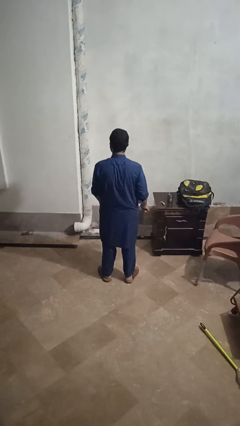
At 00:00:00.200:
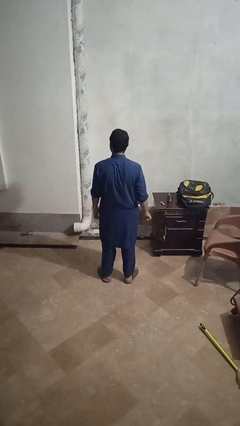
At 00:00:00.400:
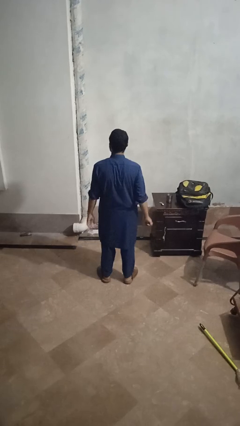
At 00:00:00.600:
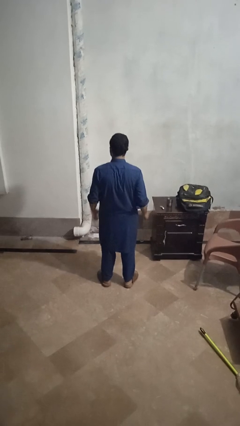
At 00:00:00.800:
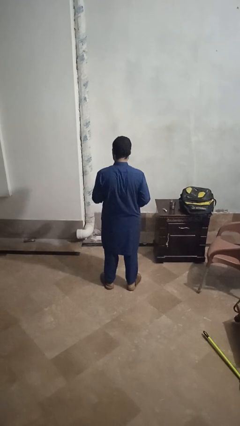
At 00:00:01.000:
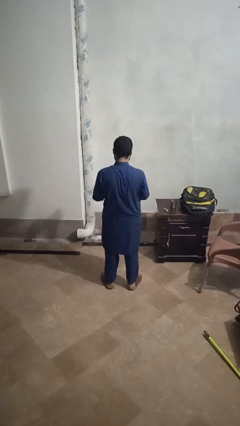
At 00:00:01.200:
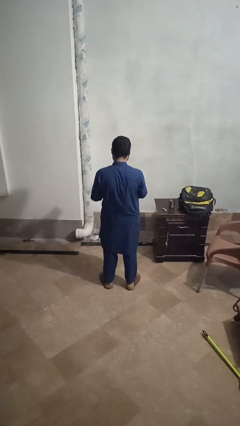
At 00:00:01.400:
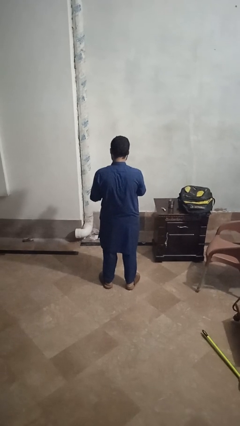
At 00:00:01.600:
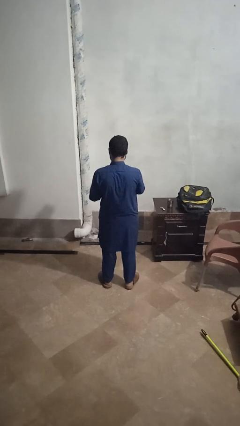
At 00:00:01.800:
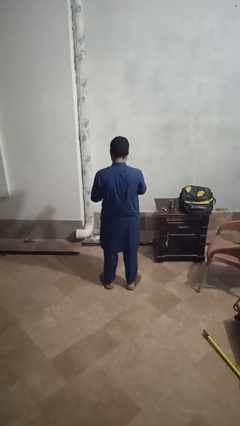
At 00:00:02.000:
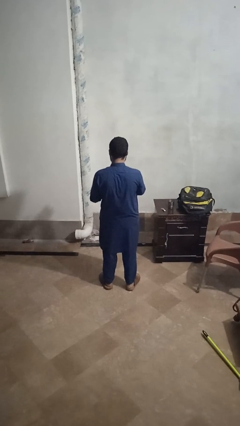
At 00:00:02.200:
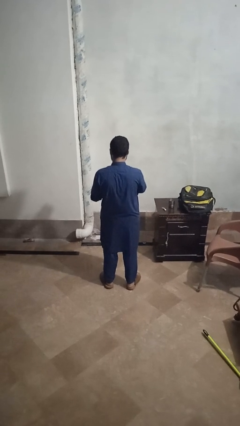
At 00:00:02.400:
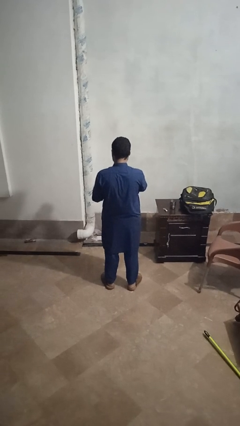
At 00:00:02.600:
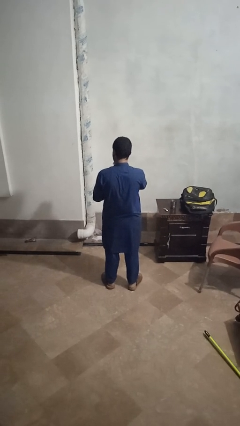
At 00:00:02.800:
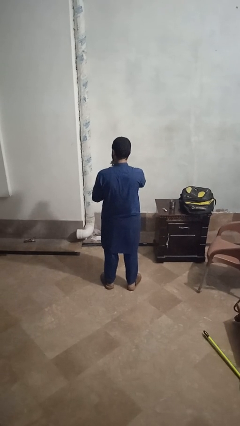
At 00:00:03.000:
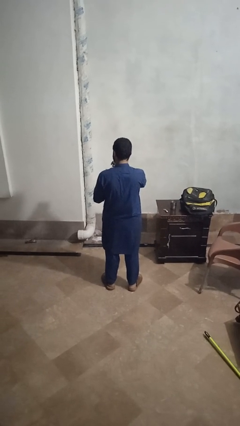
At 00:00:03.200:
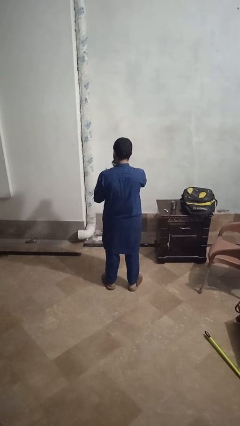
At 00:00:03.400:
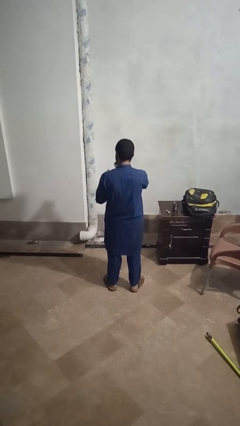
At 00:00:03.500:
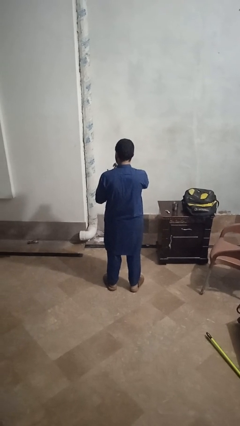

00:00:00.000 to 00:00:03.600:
person files fingernails

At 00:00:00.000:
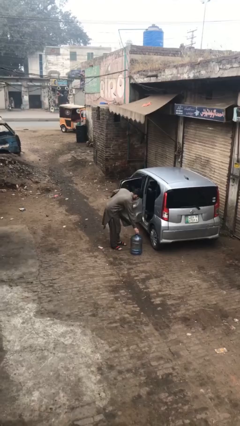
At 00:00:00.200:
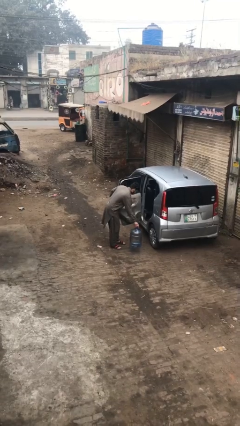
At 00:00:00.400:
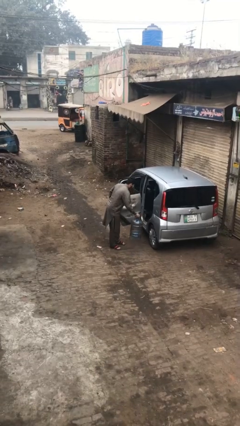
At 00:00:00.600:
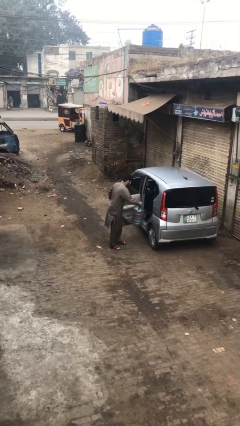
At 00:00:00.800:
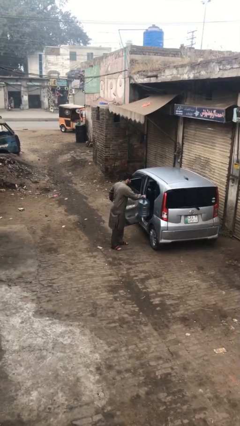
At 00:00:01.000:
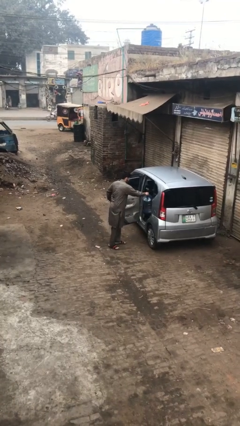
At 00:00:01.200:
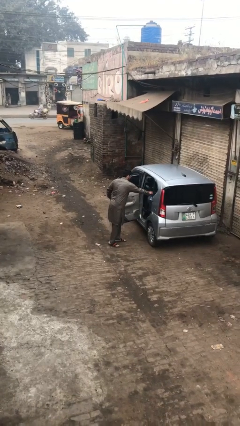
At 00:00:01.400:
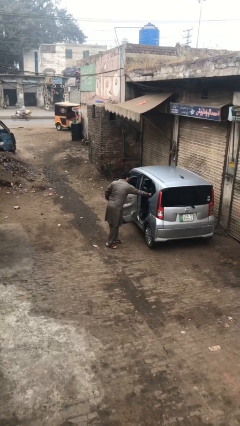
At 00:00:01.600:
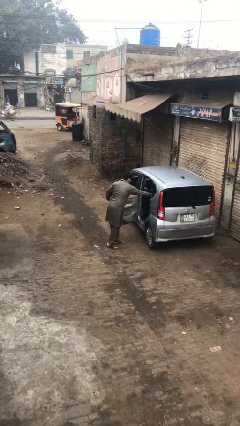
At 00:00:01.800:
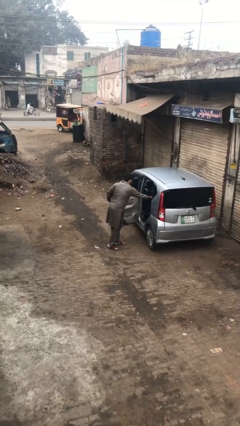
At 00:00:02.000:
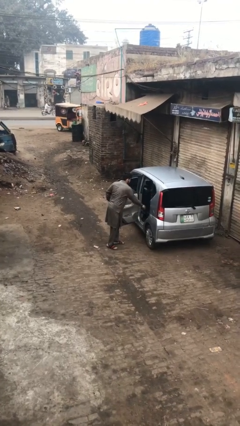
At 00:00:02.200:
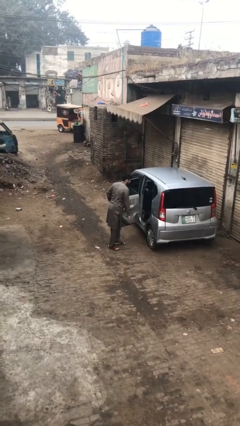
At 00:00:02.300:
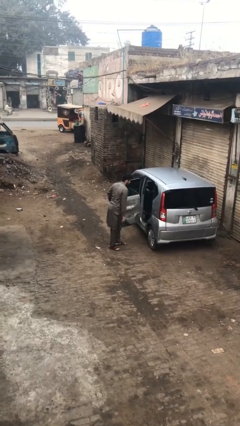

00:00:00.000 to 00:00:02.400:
person loads car

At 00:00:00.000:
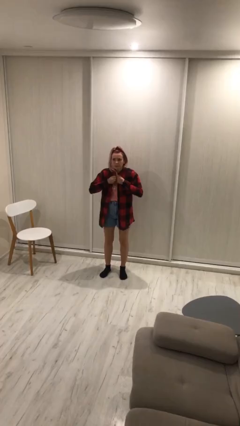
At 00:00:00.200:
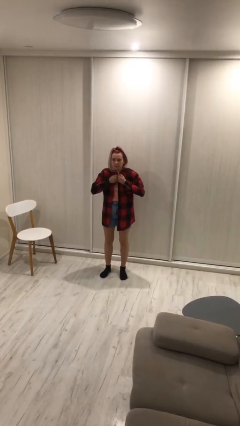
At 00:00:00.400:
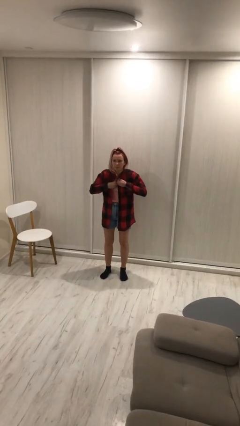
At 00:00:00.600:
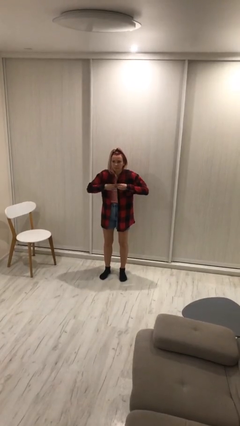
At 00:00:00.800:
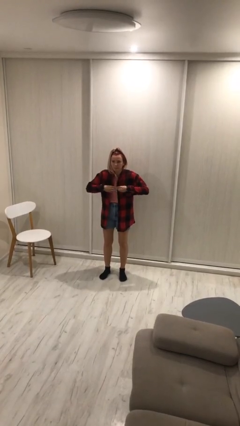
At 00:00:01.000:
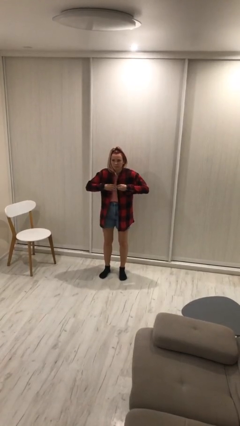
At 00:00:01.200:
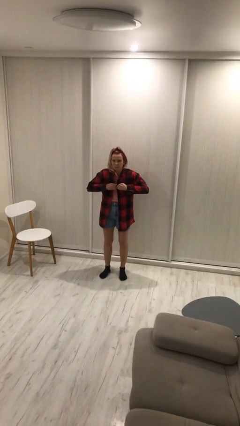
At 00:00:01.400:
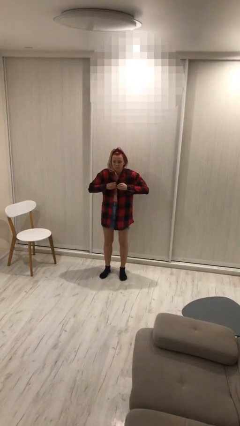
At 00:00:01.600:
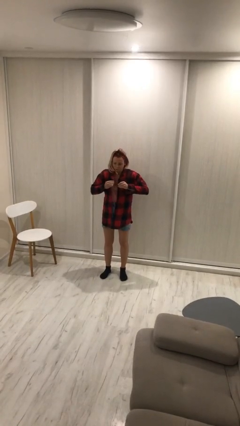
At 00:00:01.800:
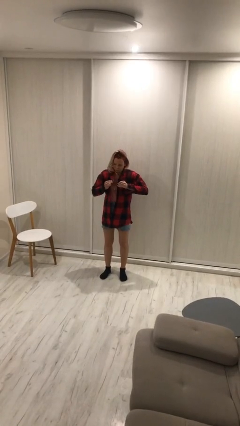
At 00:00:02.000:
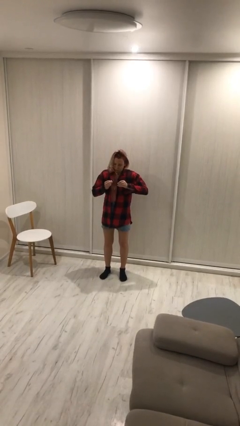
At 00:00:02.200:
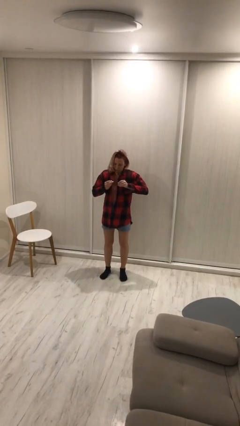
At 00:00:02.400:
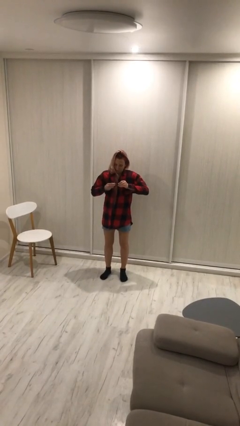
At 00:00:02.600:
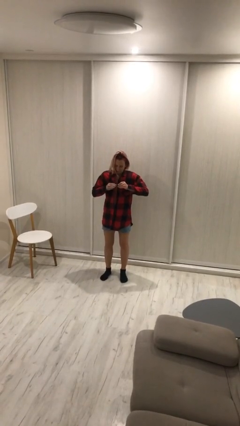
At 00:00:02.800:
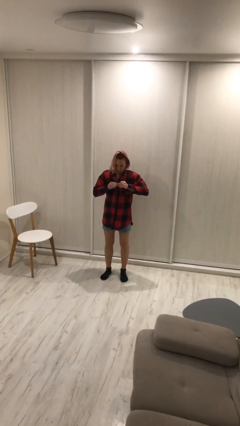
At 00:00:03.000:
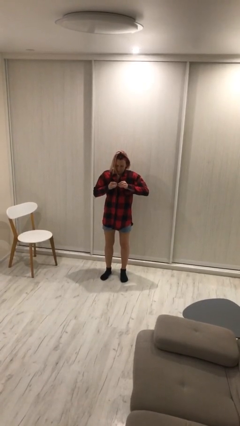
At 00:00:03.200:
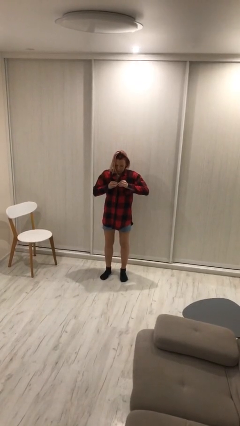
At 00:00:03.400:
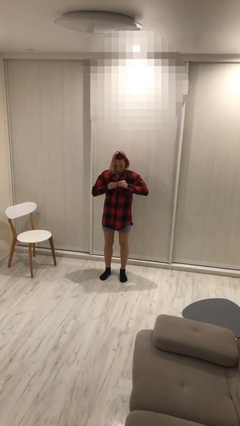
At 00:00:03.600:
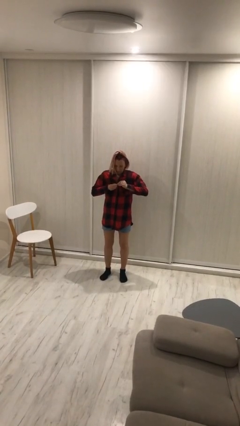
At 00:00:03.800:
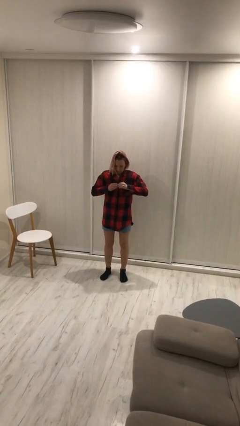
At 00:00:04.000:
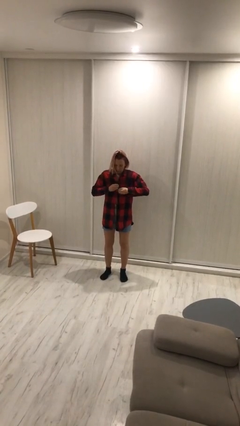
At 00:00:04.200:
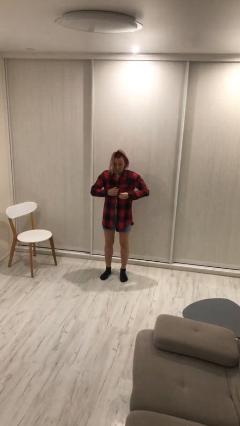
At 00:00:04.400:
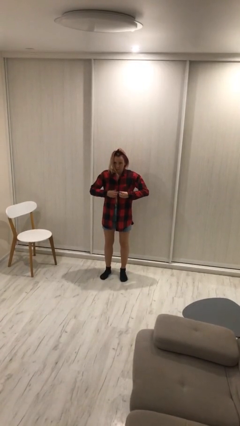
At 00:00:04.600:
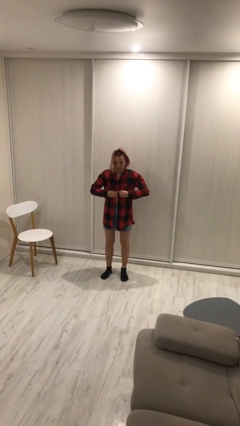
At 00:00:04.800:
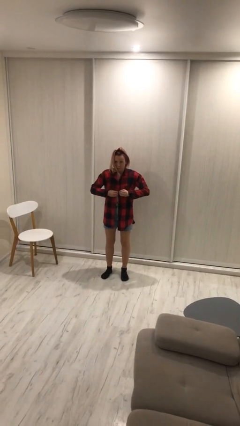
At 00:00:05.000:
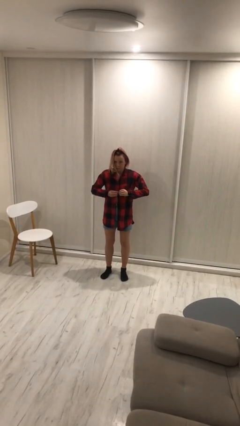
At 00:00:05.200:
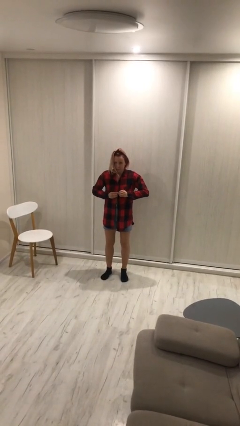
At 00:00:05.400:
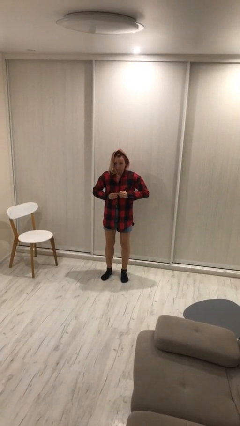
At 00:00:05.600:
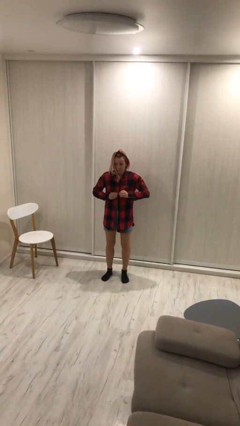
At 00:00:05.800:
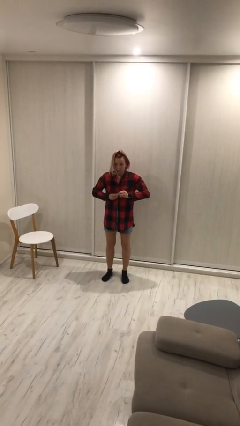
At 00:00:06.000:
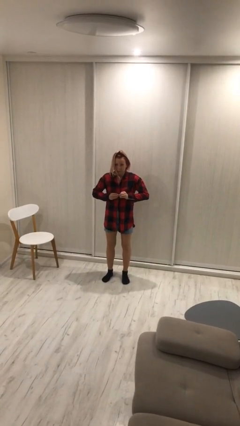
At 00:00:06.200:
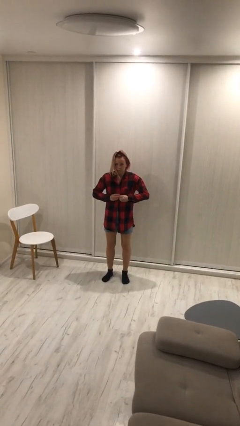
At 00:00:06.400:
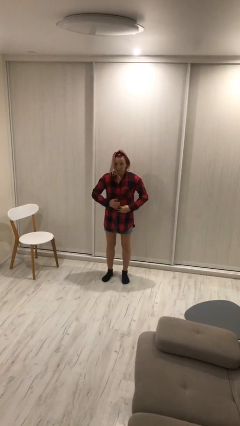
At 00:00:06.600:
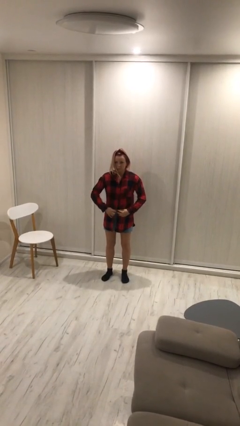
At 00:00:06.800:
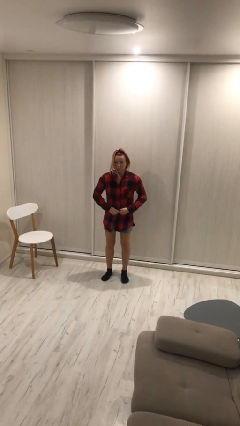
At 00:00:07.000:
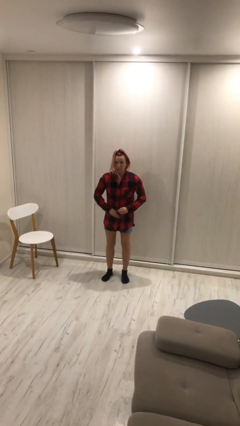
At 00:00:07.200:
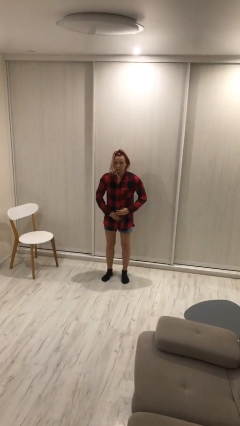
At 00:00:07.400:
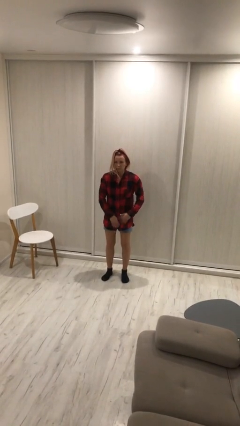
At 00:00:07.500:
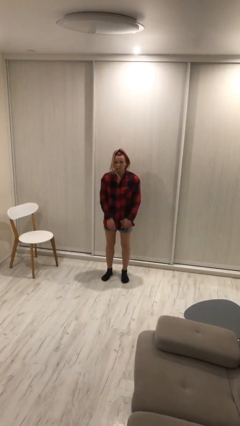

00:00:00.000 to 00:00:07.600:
person buttons shirt

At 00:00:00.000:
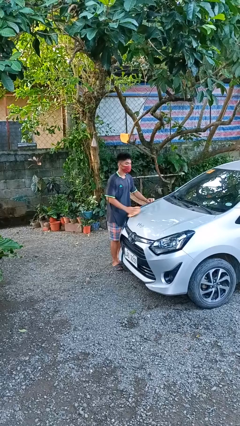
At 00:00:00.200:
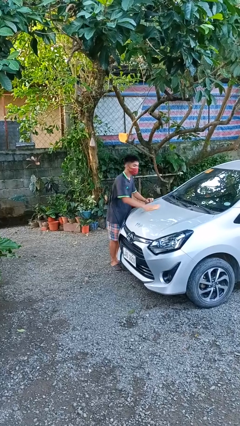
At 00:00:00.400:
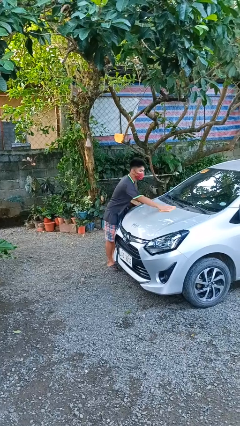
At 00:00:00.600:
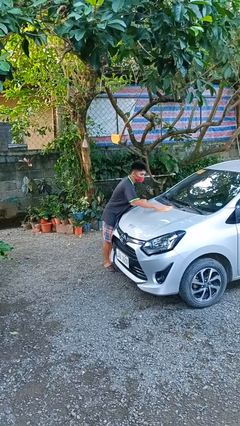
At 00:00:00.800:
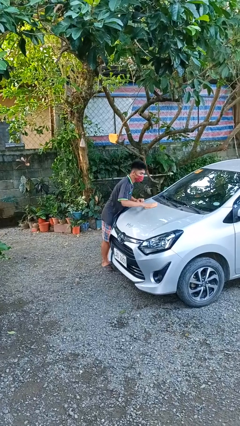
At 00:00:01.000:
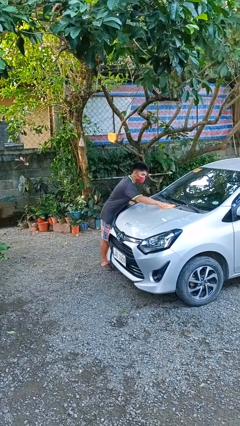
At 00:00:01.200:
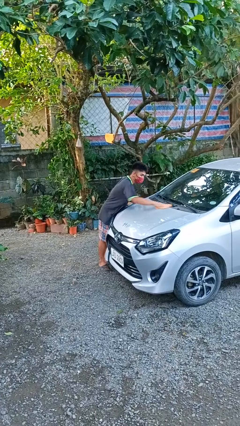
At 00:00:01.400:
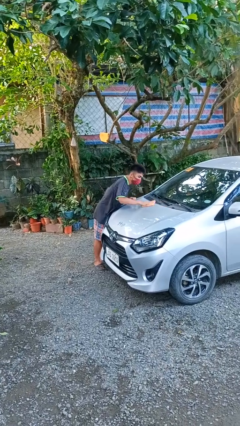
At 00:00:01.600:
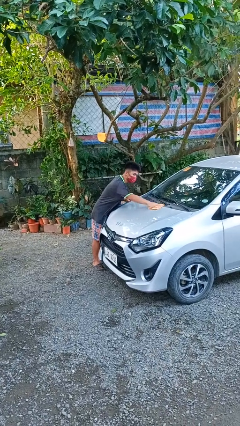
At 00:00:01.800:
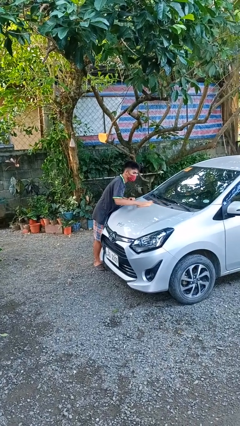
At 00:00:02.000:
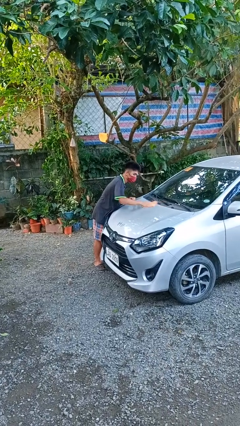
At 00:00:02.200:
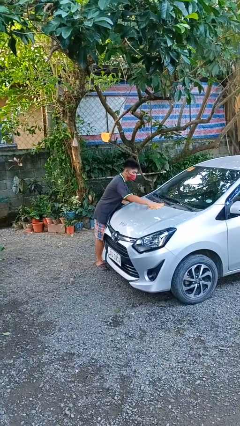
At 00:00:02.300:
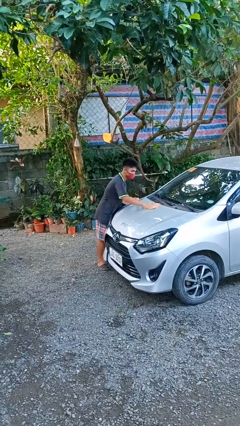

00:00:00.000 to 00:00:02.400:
person polishes car with rag

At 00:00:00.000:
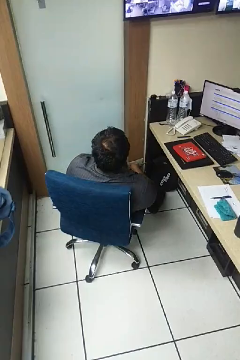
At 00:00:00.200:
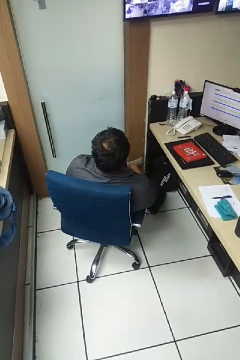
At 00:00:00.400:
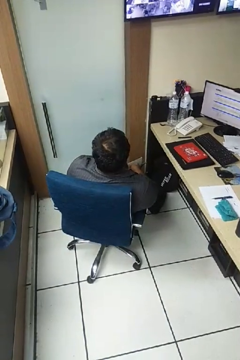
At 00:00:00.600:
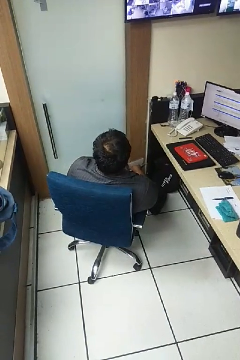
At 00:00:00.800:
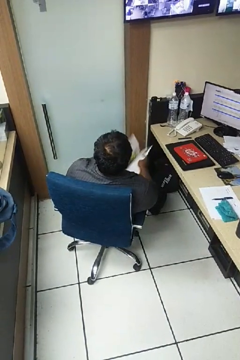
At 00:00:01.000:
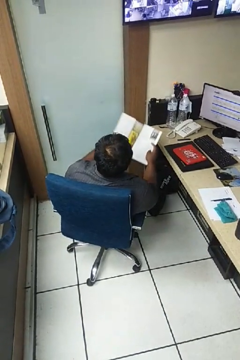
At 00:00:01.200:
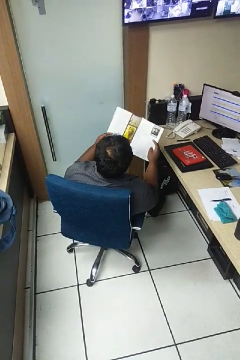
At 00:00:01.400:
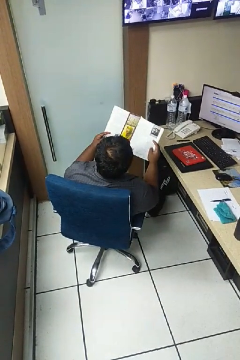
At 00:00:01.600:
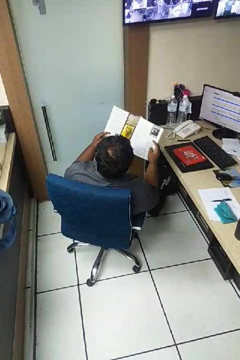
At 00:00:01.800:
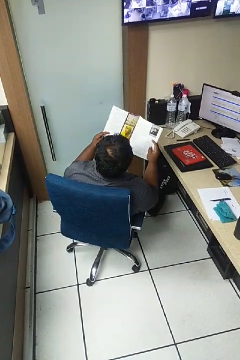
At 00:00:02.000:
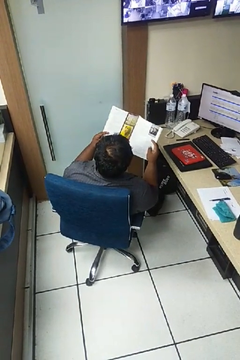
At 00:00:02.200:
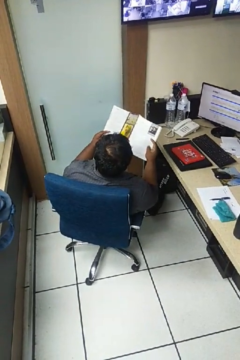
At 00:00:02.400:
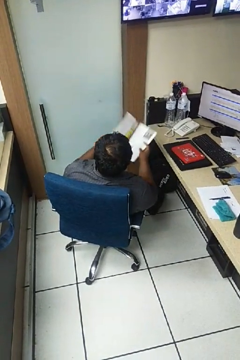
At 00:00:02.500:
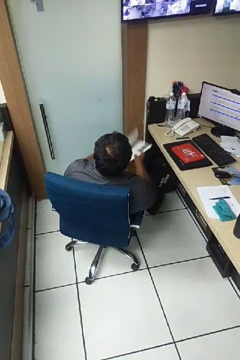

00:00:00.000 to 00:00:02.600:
person reads magazine
